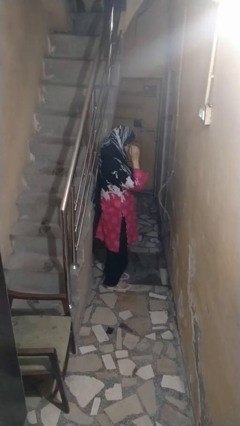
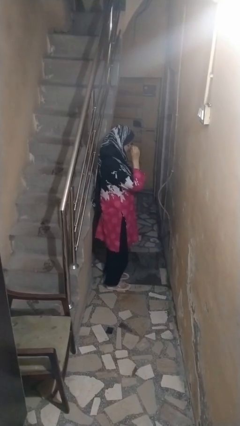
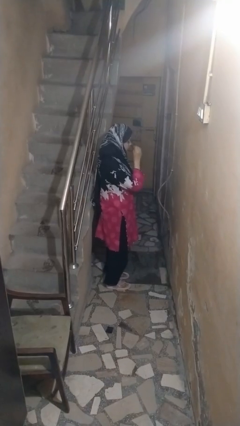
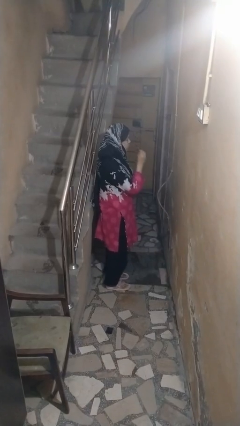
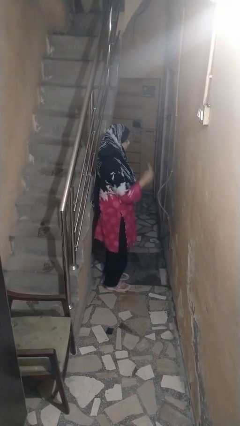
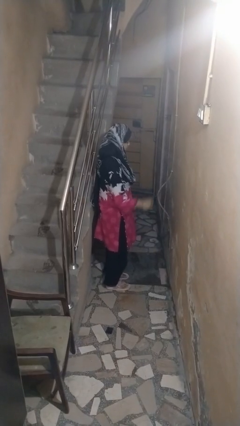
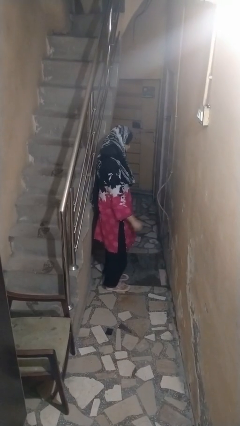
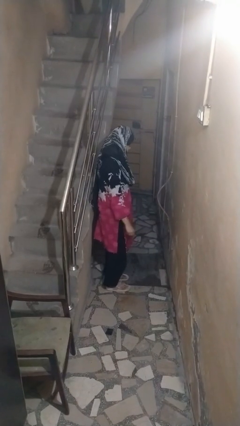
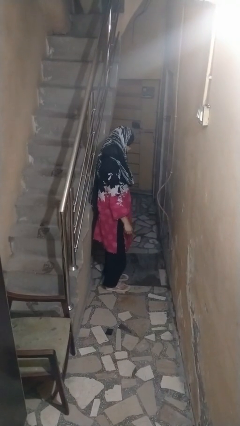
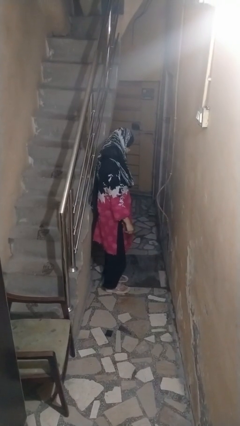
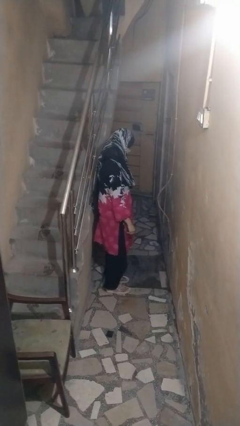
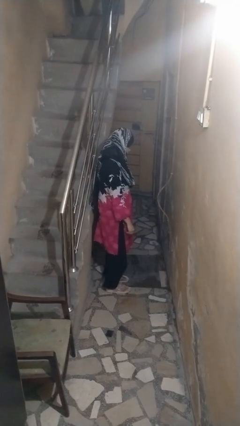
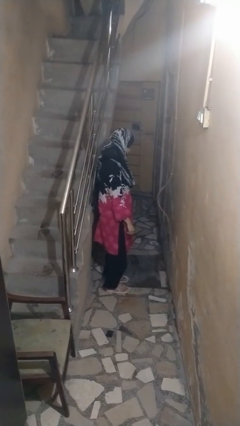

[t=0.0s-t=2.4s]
person takes off glasses

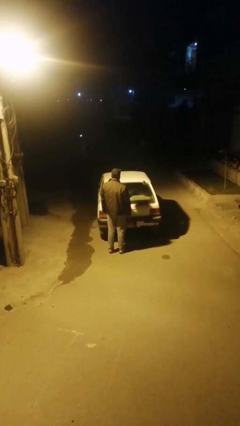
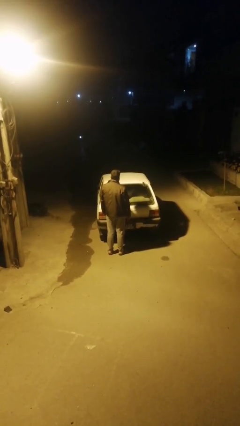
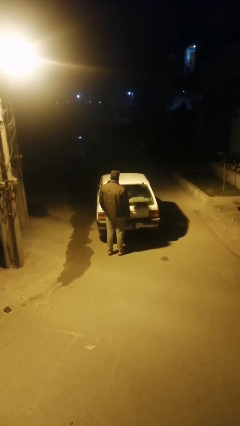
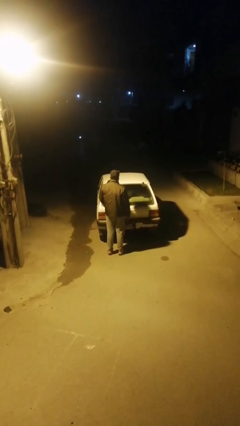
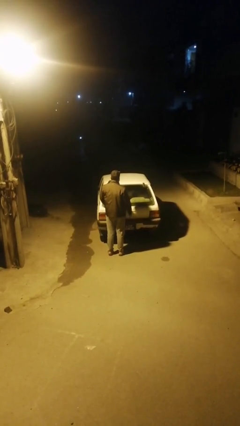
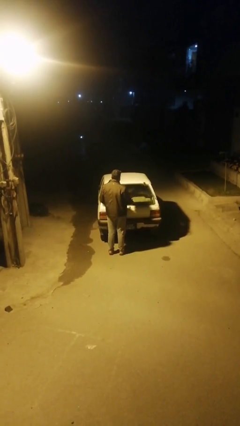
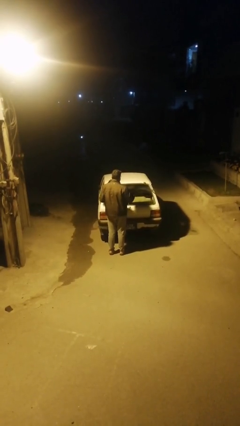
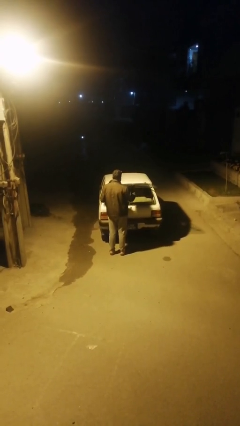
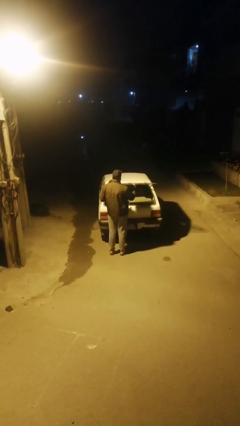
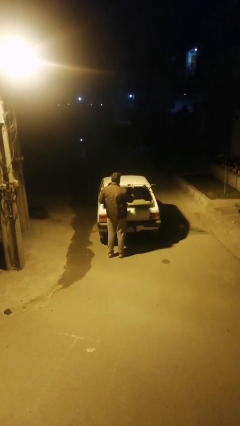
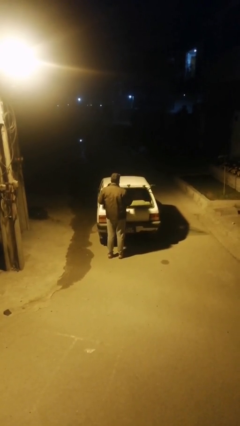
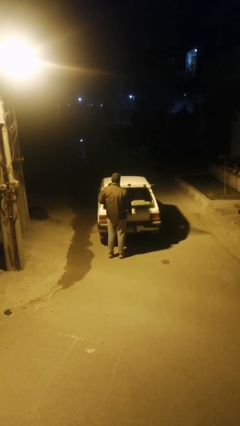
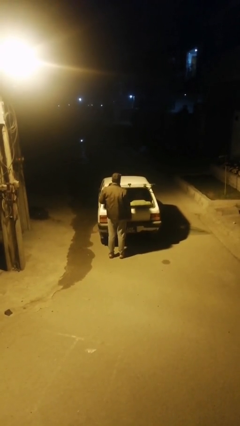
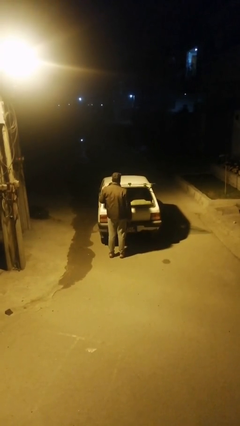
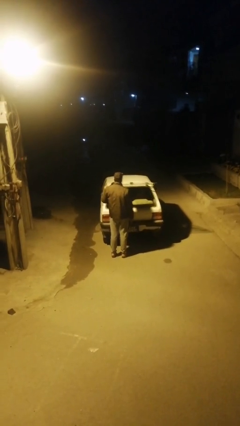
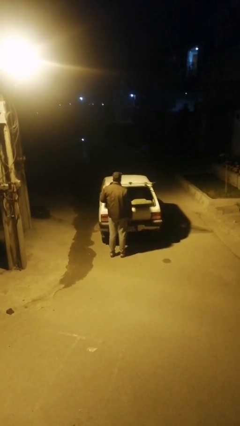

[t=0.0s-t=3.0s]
person opens car trunk

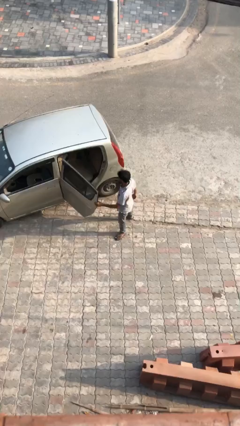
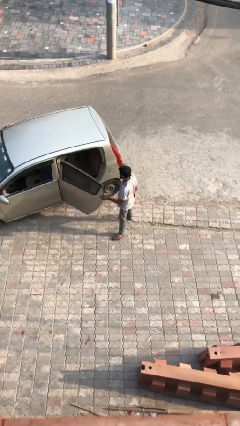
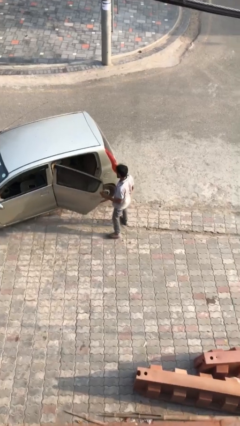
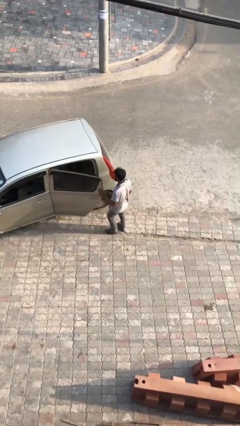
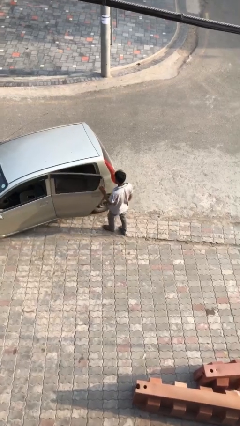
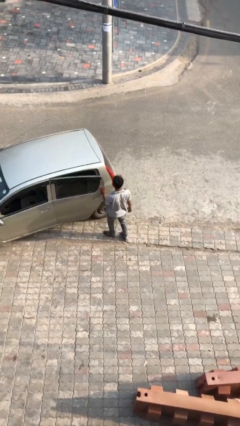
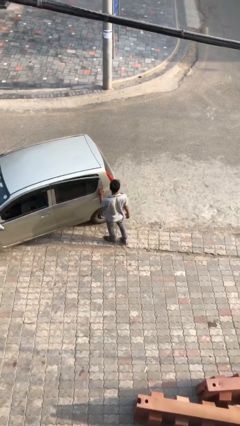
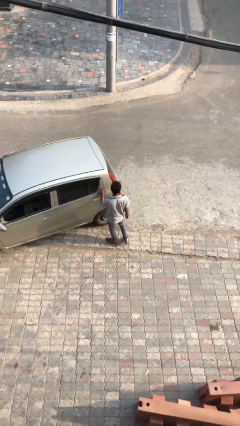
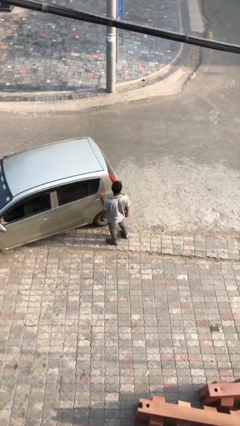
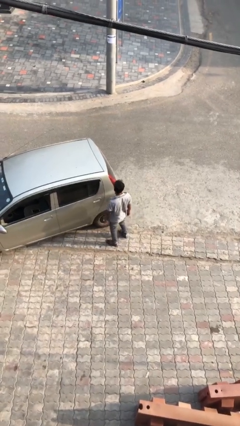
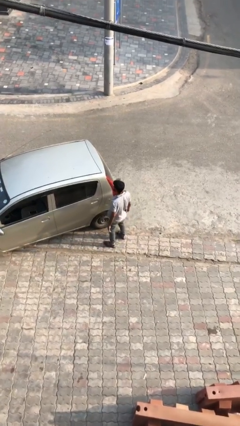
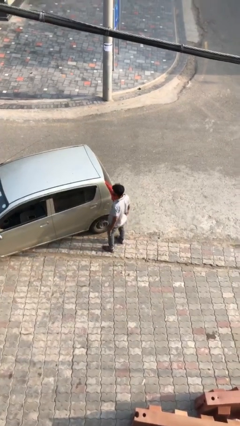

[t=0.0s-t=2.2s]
person closes car door

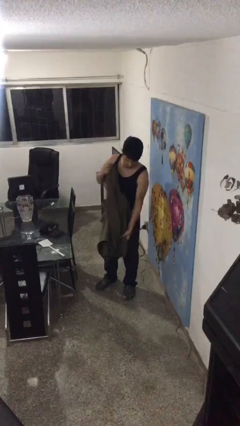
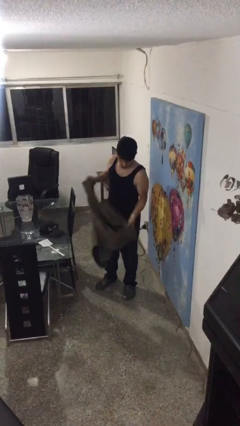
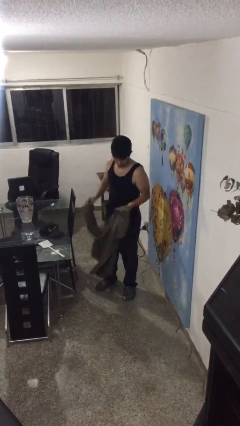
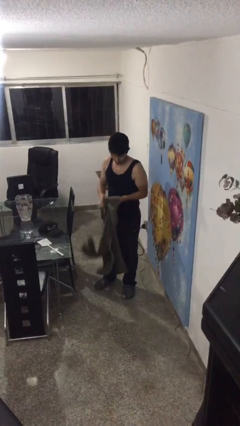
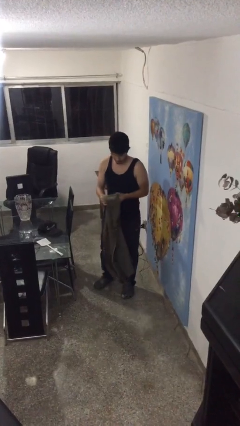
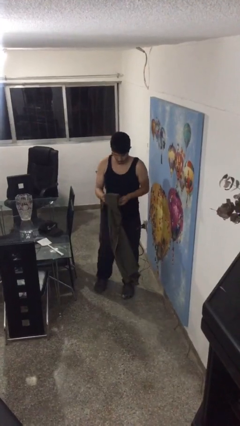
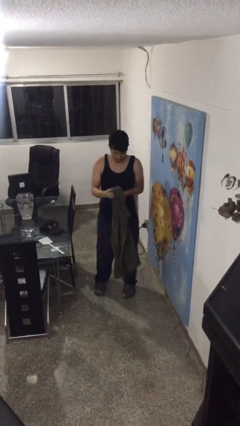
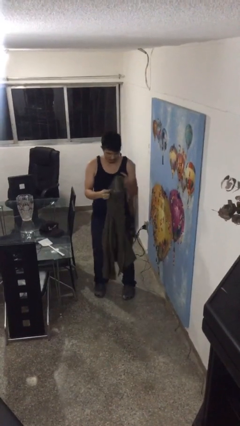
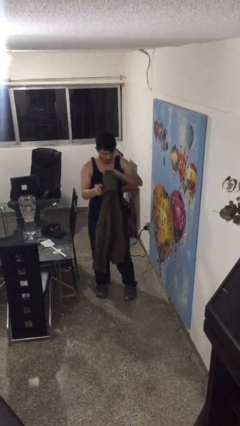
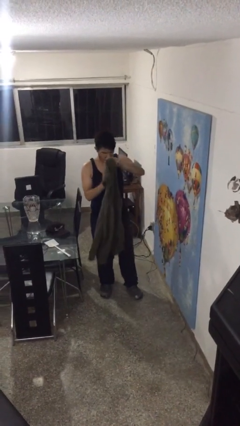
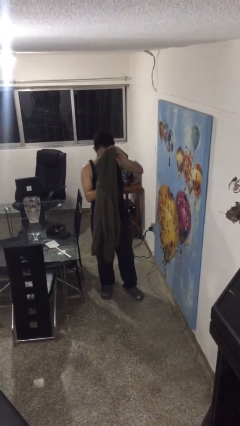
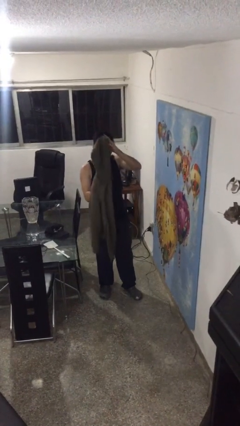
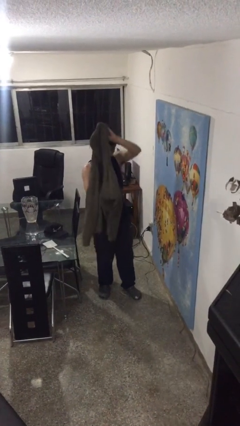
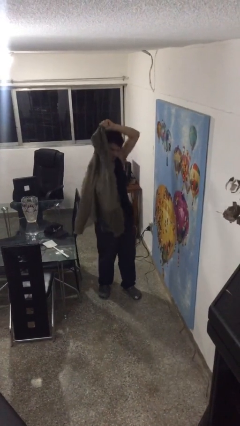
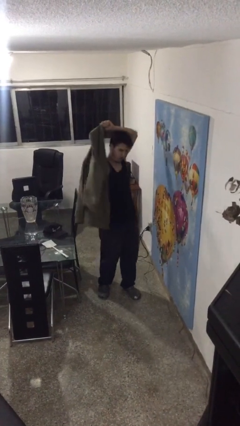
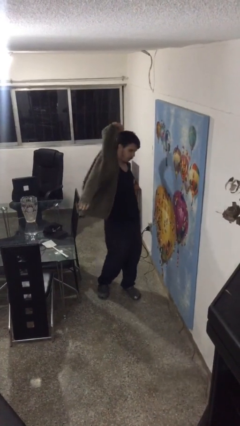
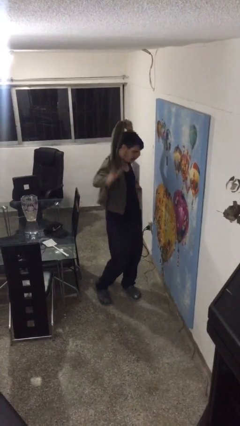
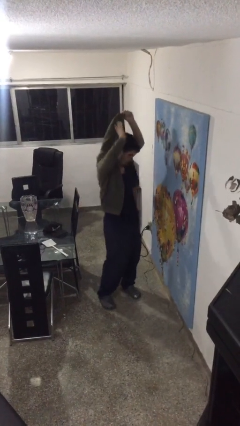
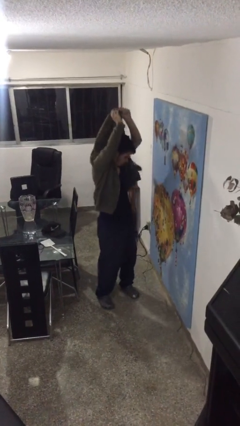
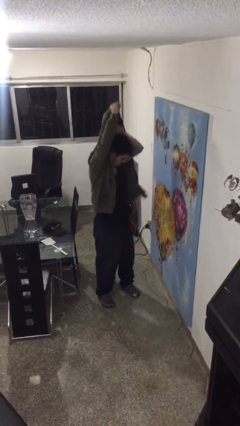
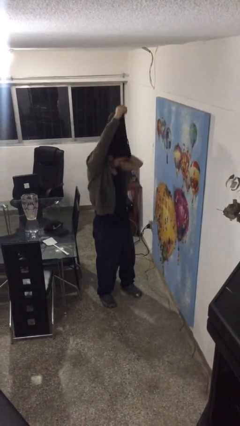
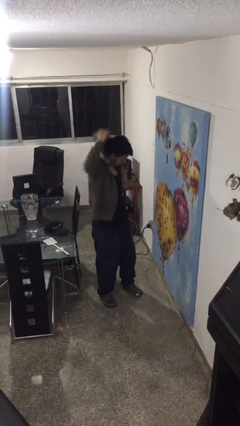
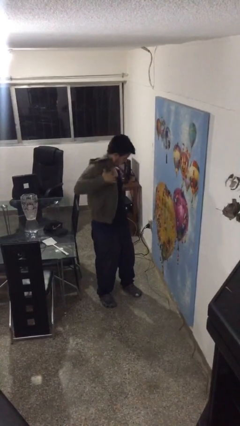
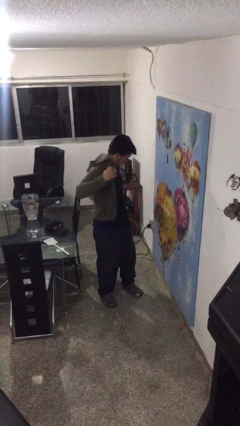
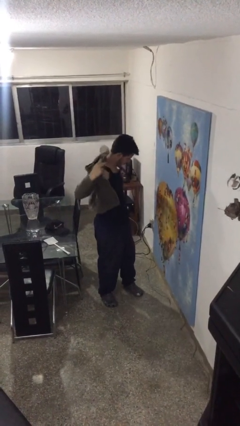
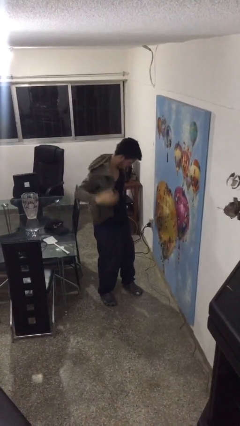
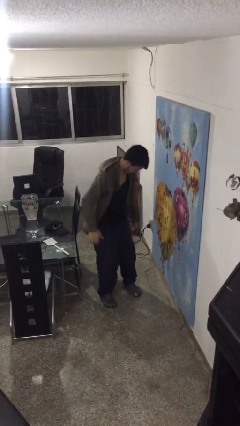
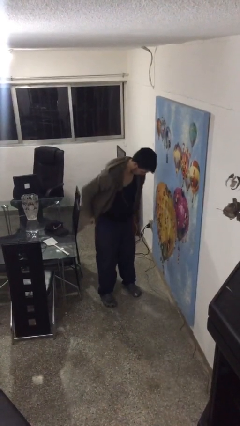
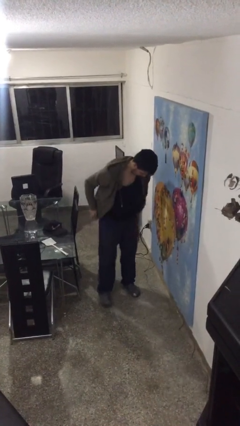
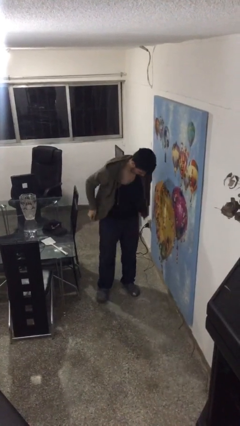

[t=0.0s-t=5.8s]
person puts on jacket

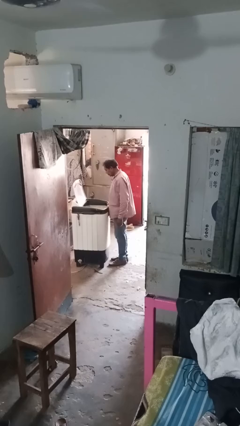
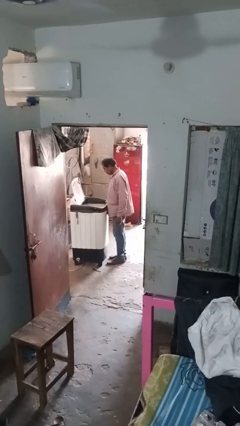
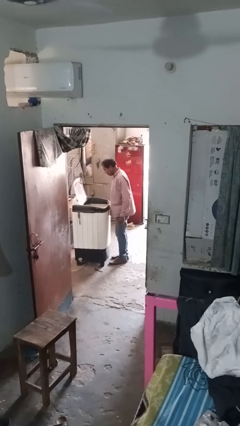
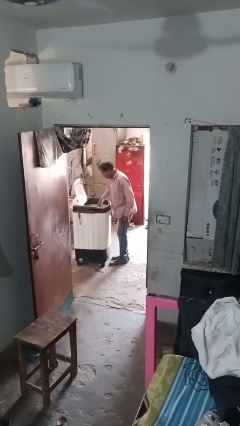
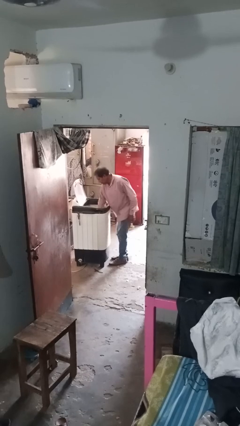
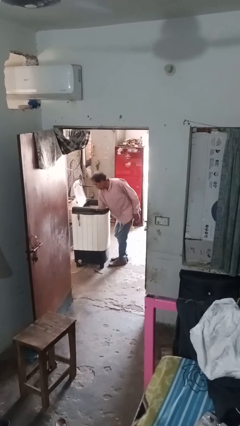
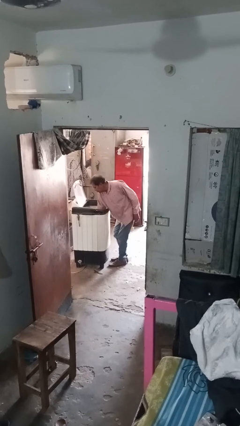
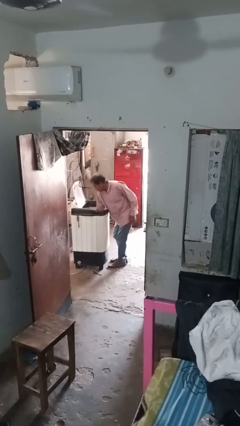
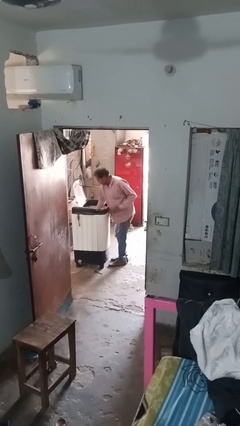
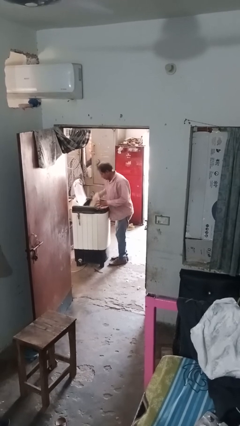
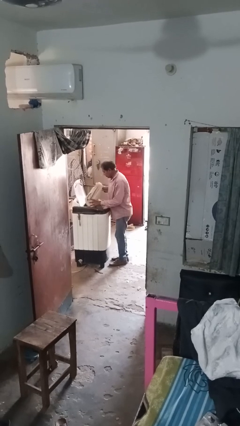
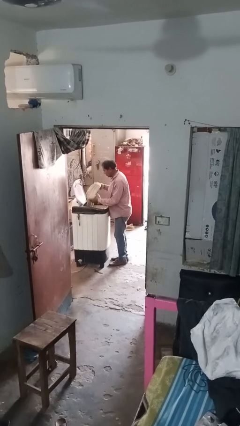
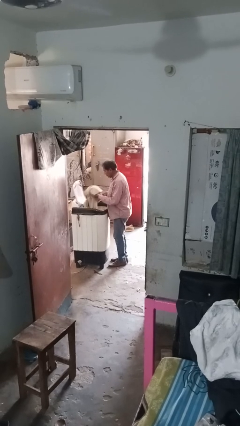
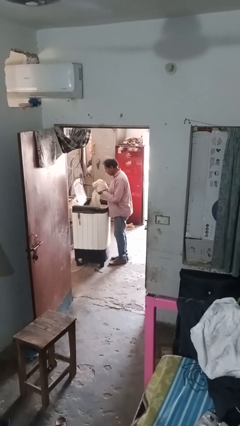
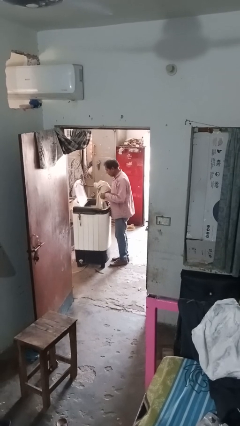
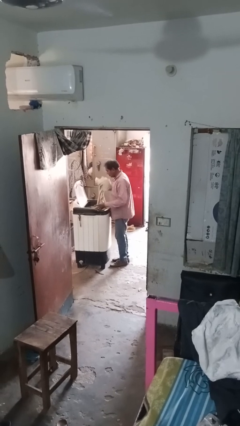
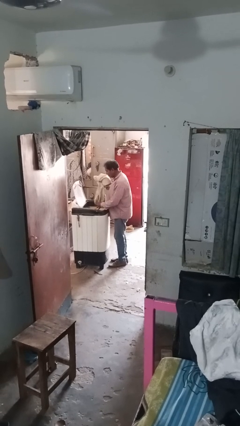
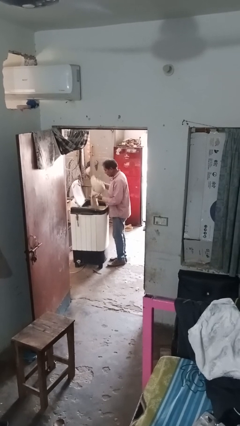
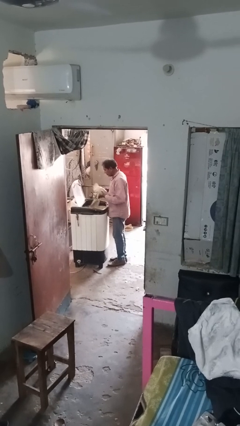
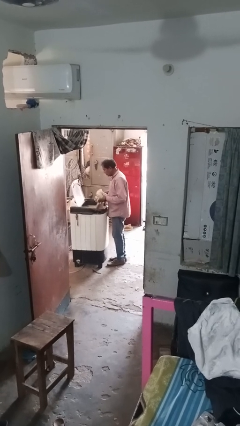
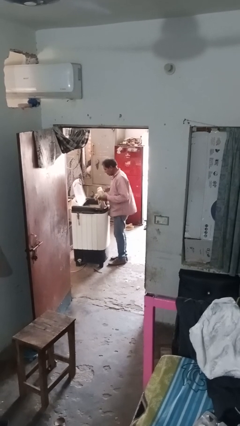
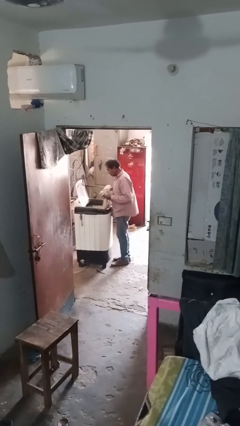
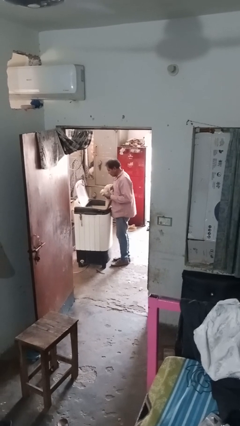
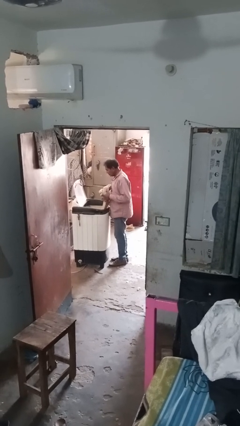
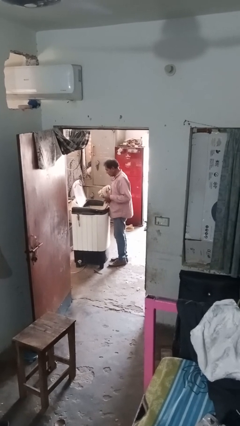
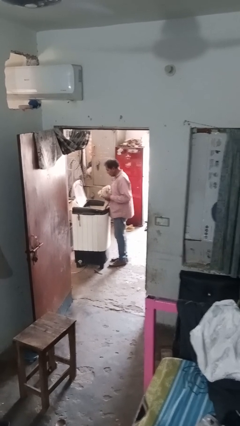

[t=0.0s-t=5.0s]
person unloads clotheswasher
